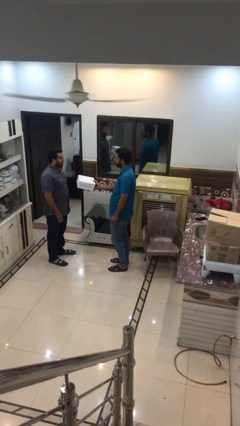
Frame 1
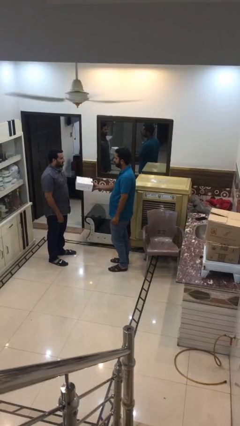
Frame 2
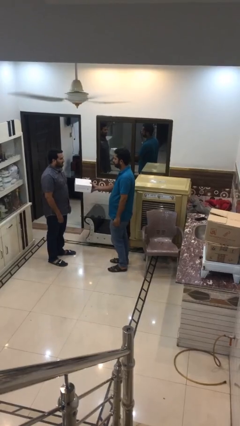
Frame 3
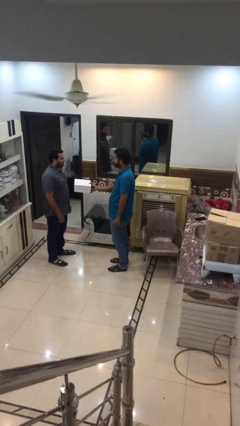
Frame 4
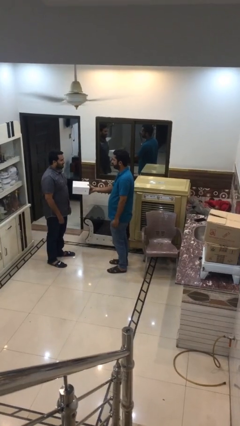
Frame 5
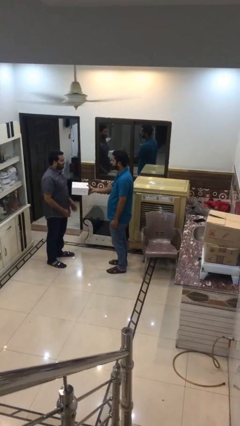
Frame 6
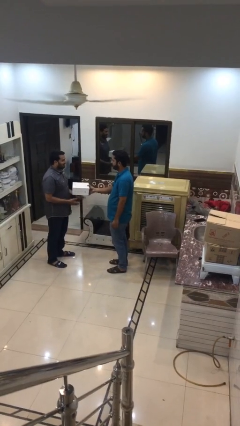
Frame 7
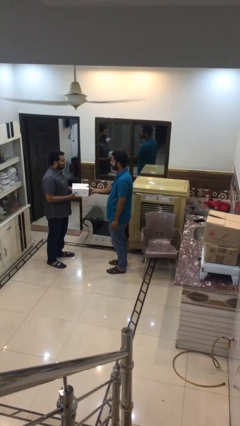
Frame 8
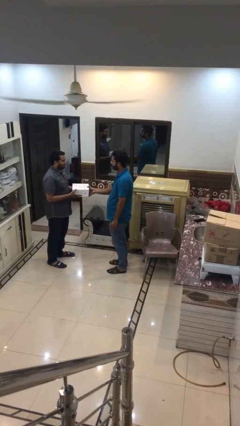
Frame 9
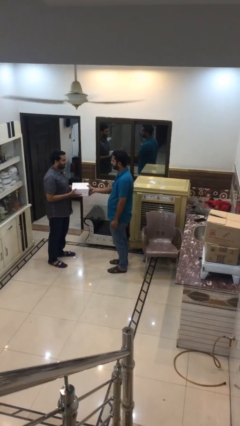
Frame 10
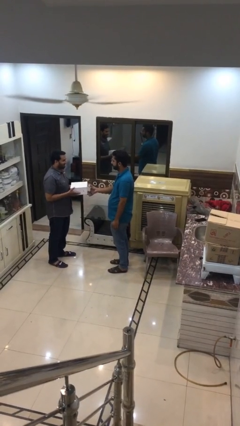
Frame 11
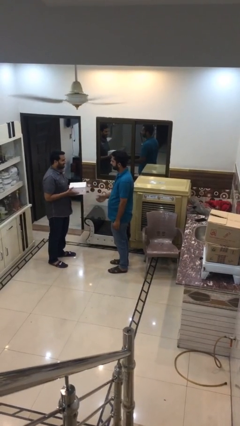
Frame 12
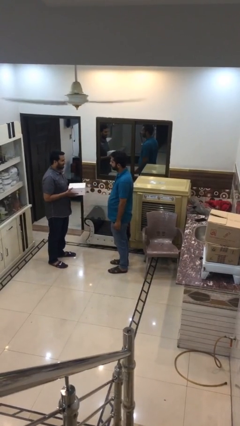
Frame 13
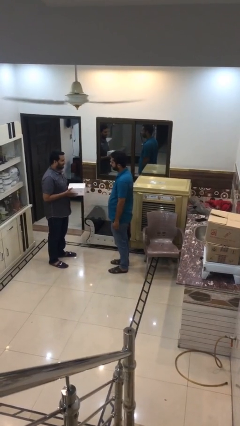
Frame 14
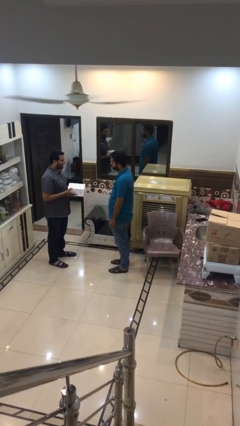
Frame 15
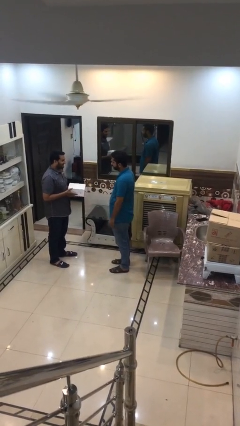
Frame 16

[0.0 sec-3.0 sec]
person transfers object to person

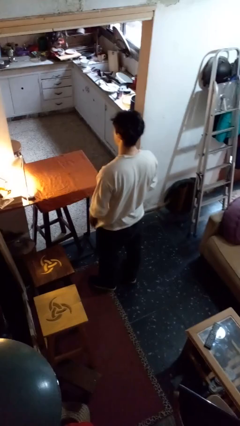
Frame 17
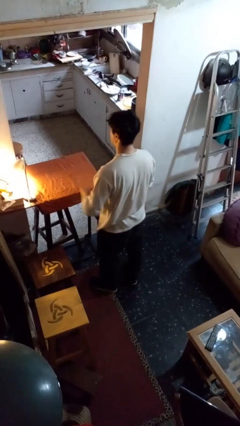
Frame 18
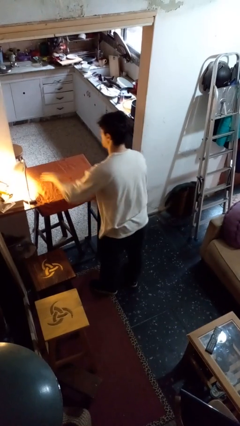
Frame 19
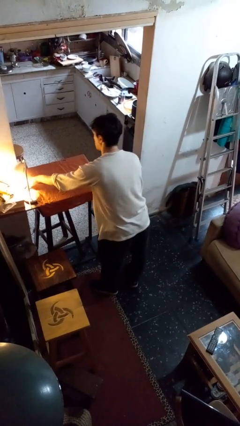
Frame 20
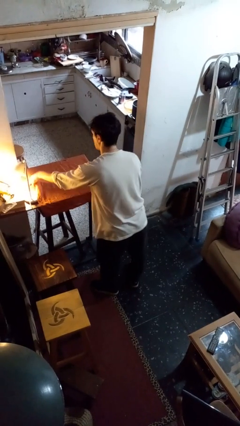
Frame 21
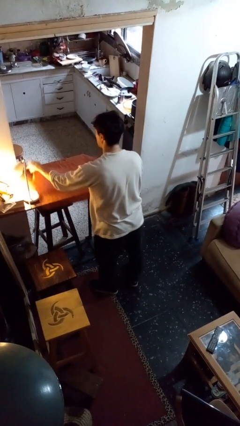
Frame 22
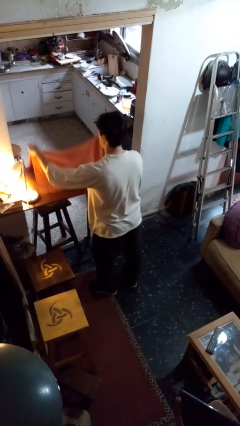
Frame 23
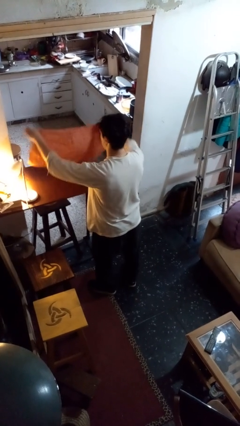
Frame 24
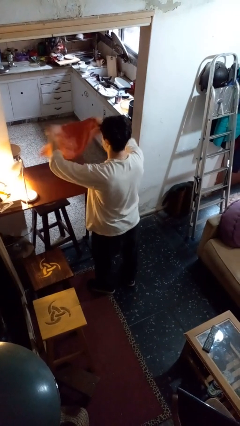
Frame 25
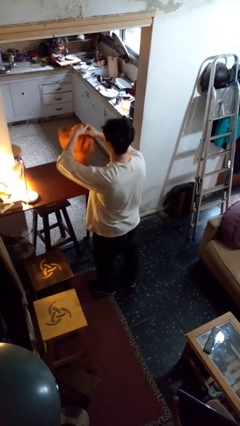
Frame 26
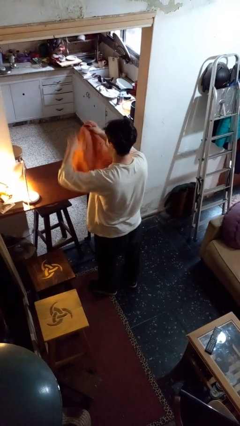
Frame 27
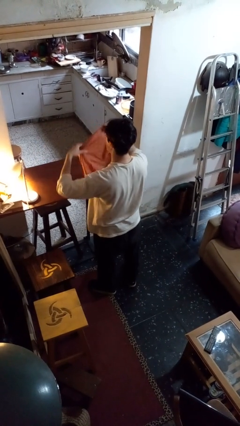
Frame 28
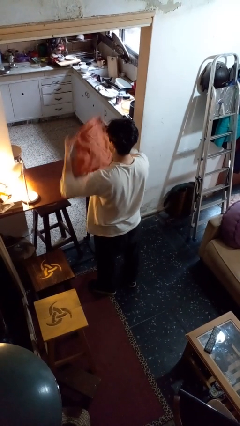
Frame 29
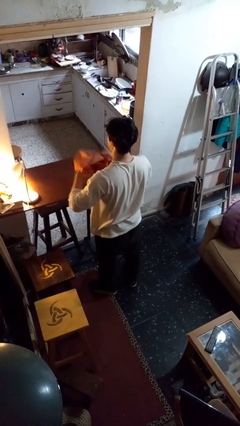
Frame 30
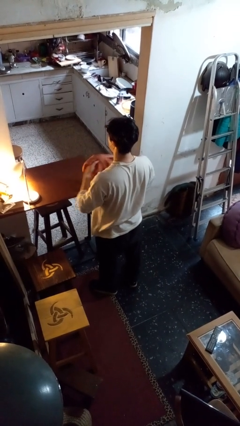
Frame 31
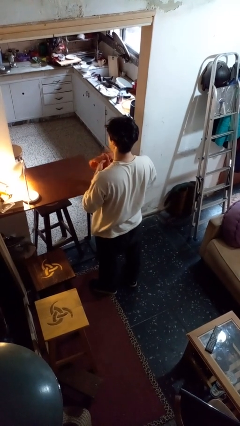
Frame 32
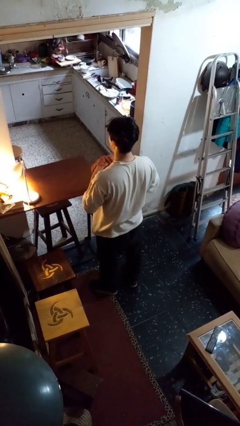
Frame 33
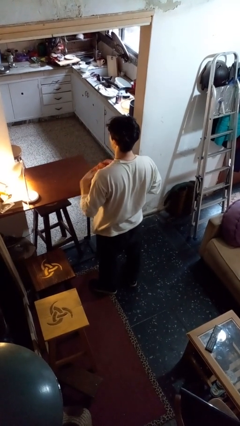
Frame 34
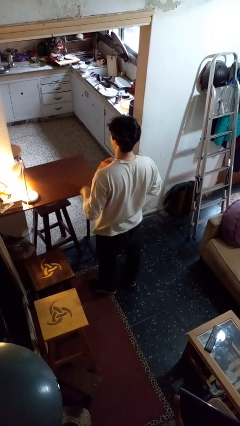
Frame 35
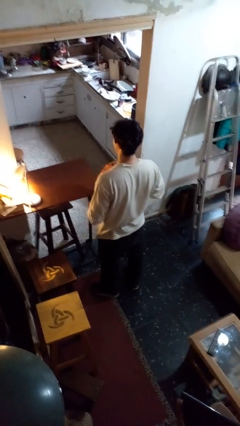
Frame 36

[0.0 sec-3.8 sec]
person folds tablecloth

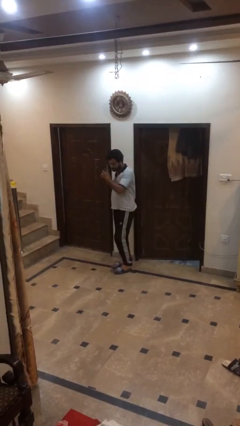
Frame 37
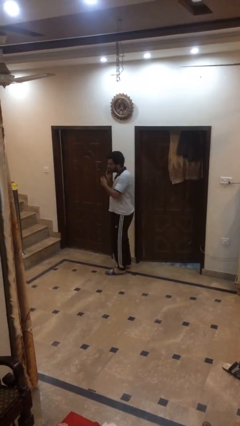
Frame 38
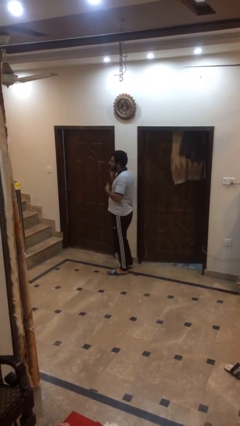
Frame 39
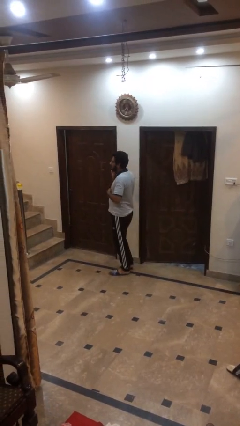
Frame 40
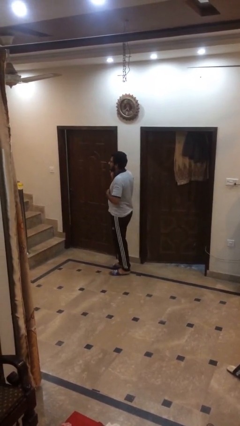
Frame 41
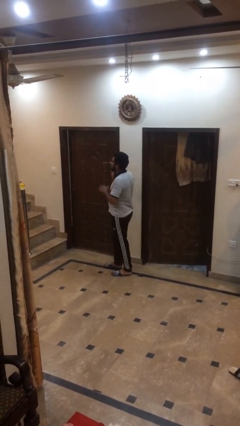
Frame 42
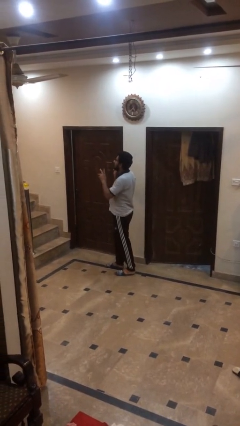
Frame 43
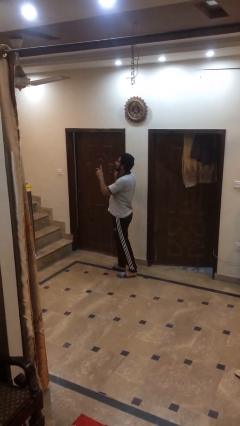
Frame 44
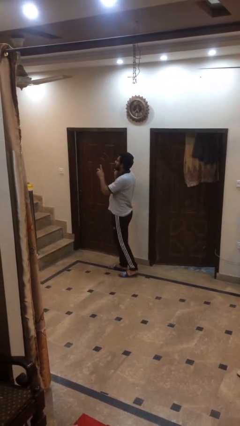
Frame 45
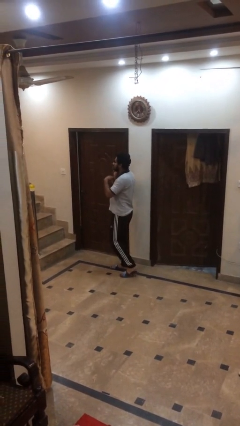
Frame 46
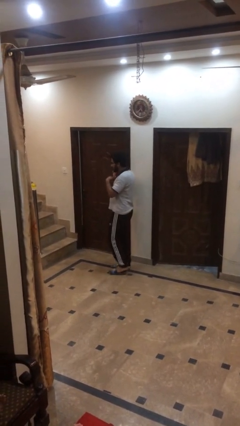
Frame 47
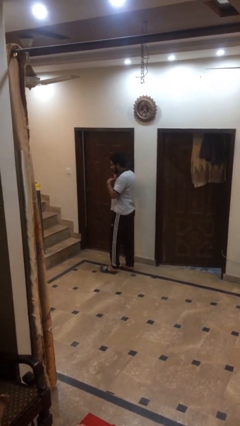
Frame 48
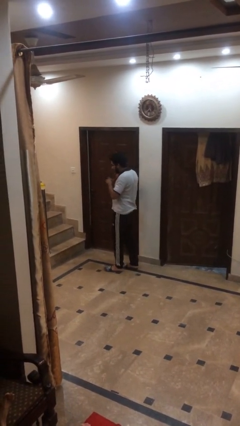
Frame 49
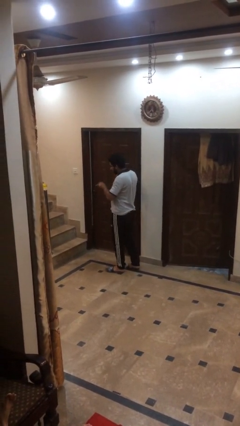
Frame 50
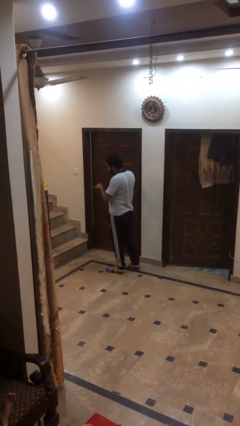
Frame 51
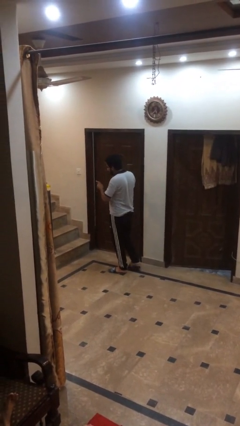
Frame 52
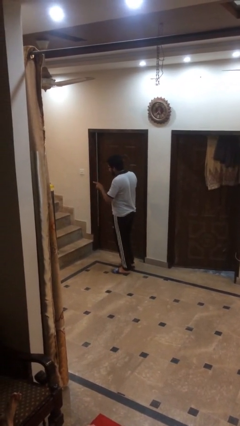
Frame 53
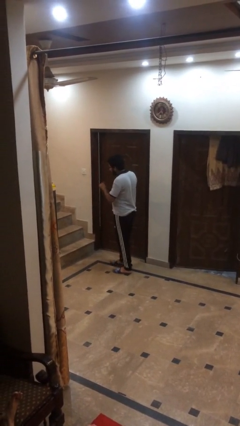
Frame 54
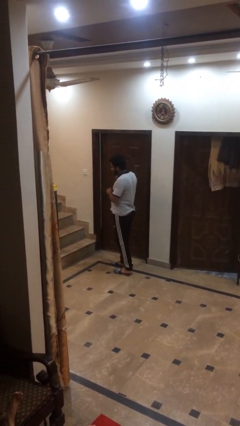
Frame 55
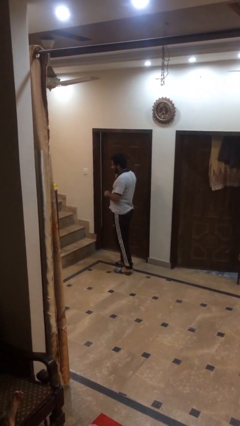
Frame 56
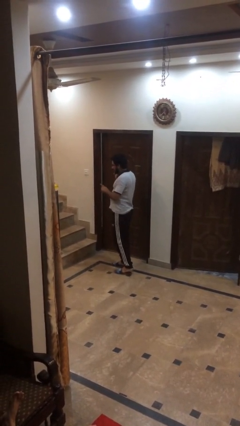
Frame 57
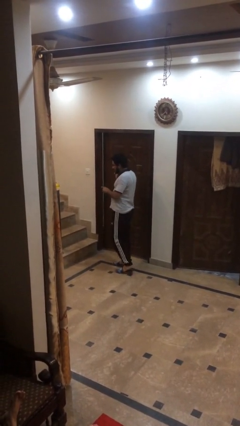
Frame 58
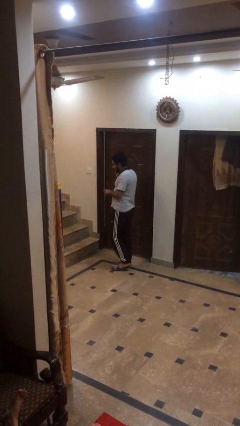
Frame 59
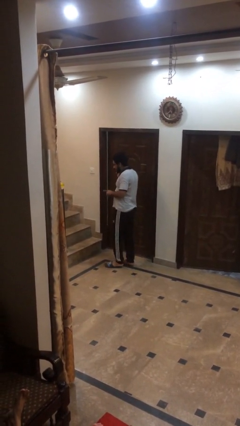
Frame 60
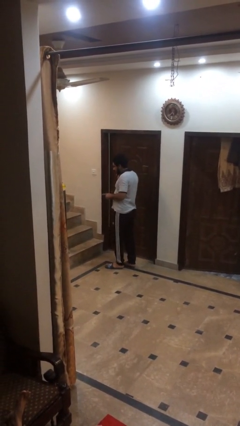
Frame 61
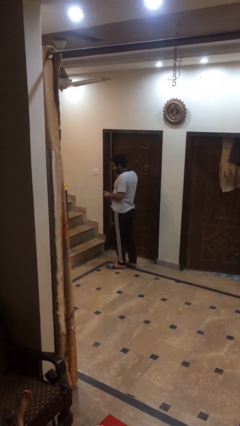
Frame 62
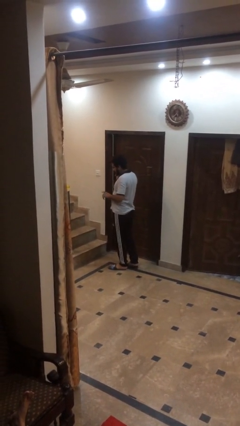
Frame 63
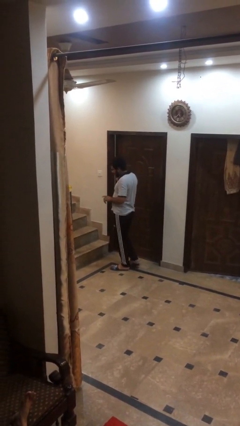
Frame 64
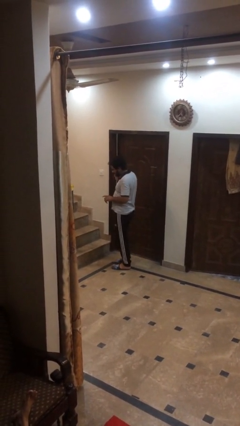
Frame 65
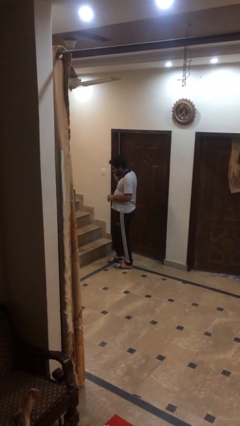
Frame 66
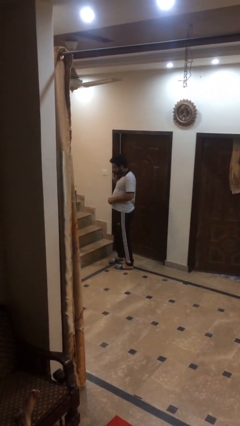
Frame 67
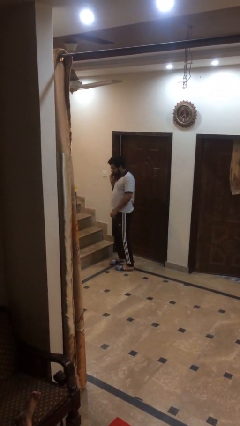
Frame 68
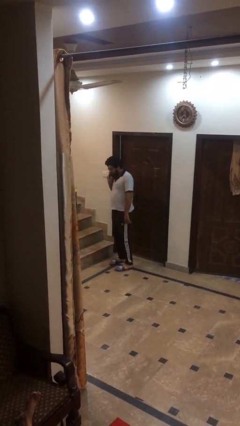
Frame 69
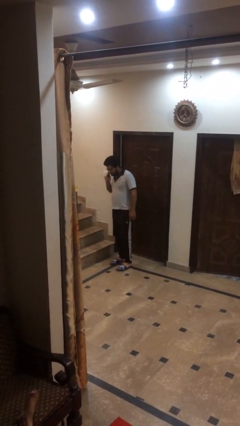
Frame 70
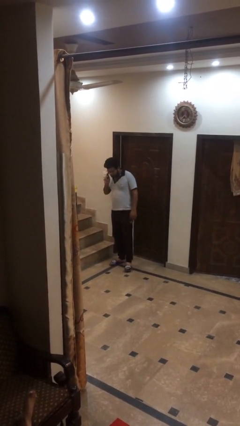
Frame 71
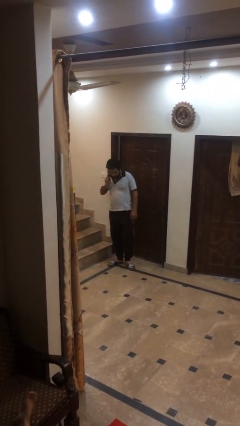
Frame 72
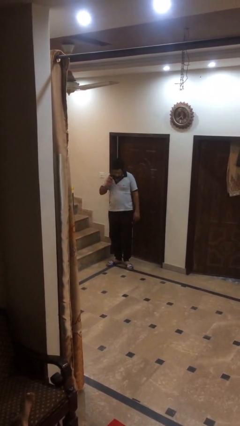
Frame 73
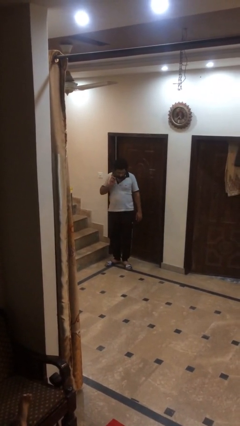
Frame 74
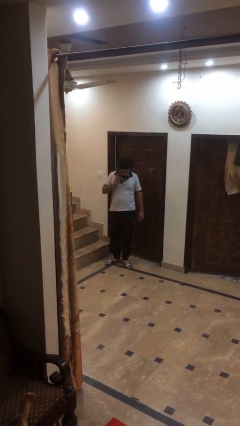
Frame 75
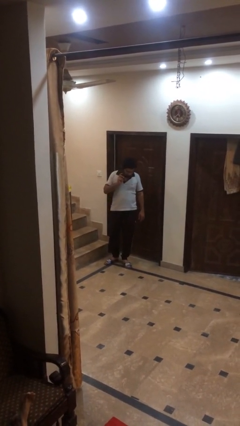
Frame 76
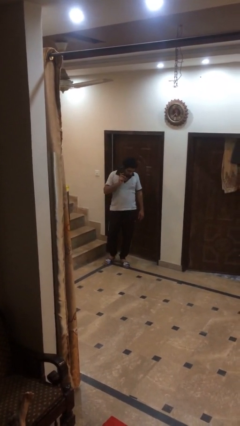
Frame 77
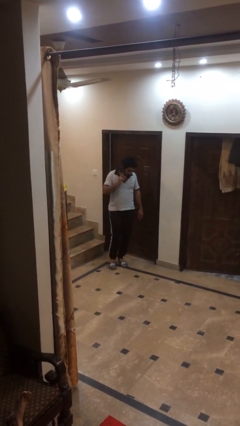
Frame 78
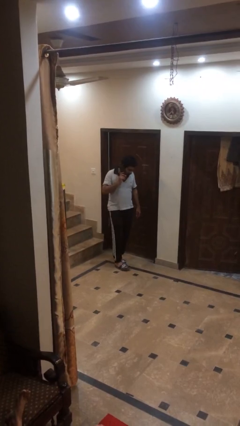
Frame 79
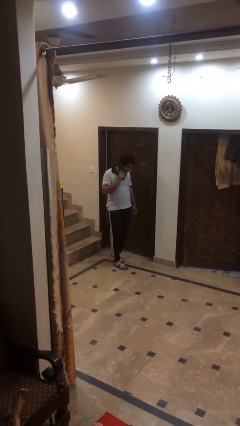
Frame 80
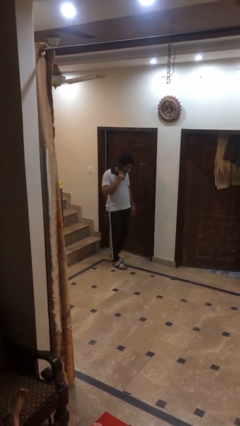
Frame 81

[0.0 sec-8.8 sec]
person talks on phone

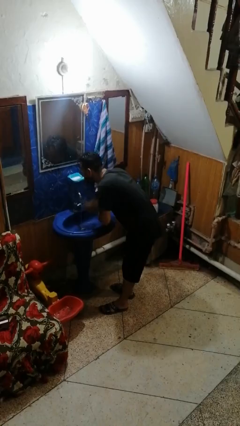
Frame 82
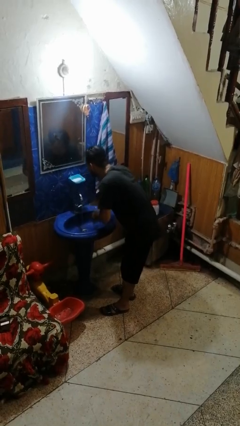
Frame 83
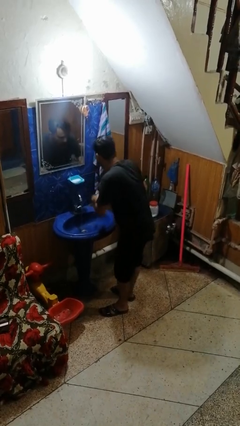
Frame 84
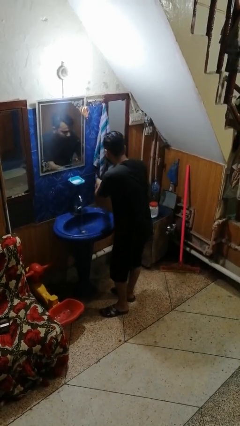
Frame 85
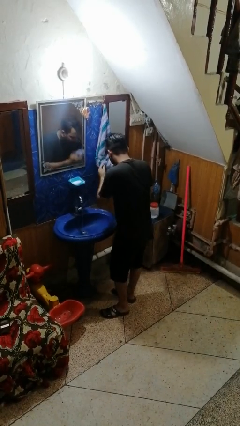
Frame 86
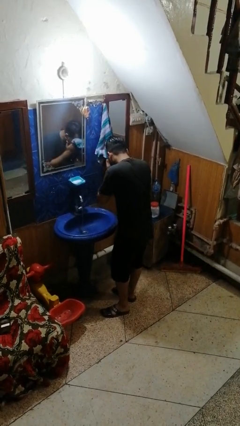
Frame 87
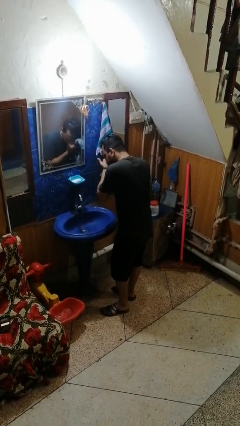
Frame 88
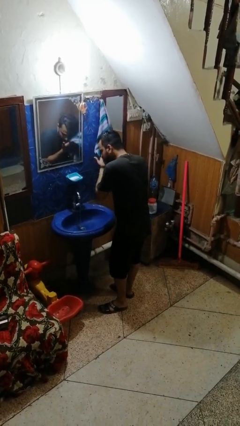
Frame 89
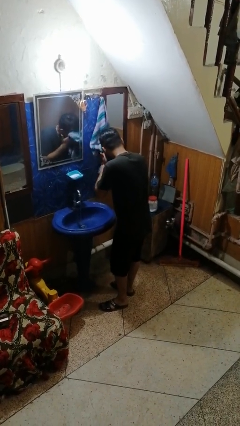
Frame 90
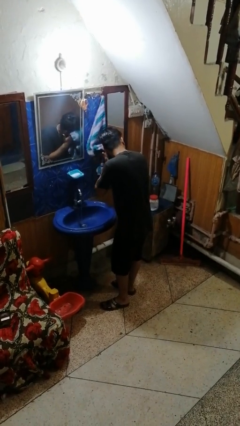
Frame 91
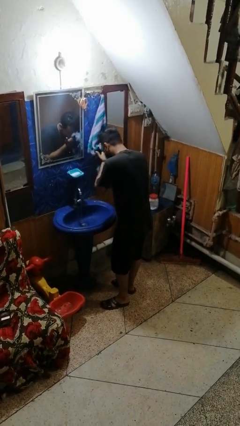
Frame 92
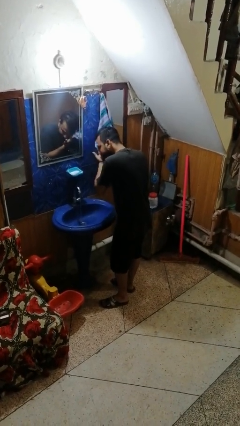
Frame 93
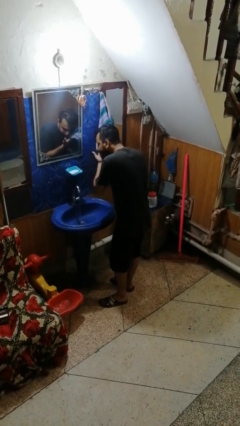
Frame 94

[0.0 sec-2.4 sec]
person dries face with towel
